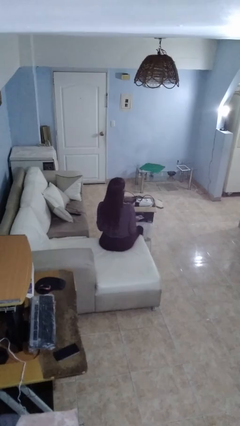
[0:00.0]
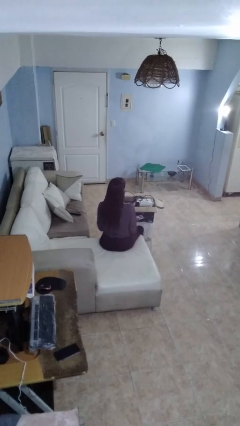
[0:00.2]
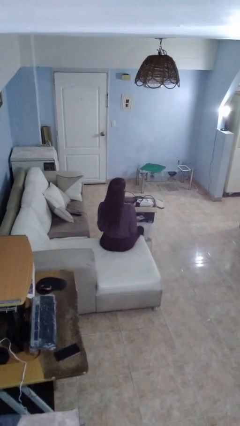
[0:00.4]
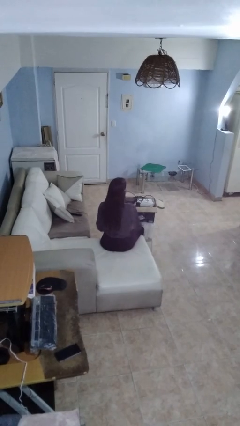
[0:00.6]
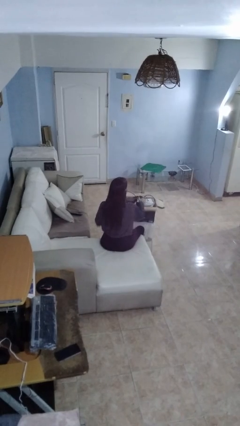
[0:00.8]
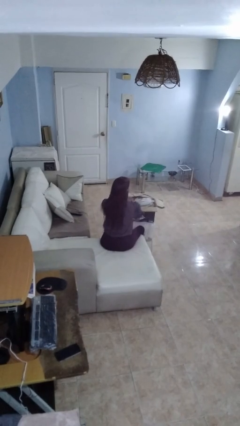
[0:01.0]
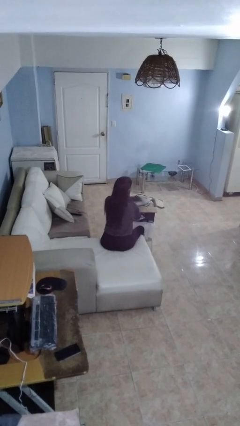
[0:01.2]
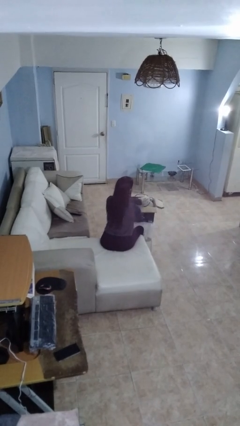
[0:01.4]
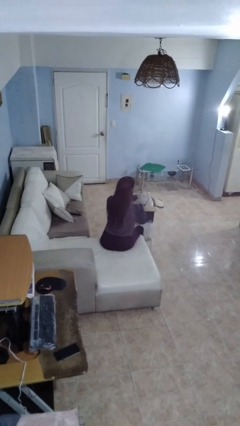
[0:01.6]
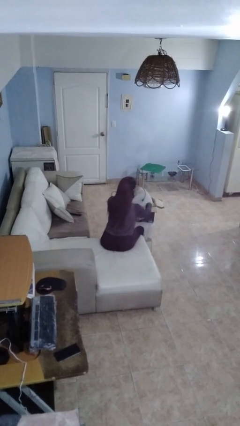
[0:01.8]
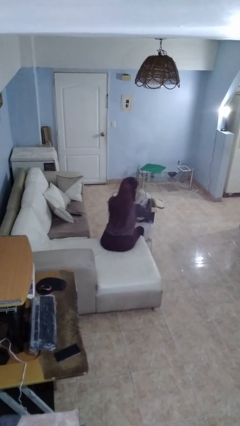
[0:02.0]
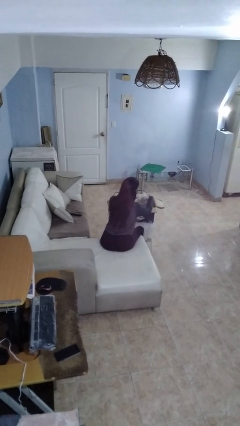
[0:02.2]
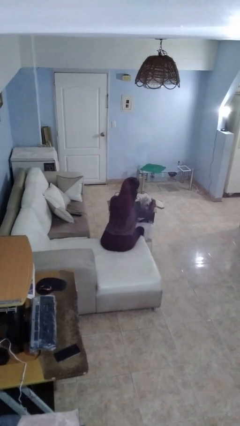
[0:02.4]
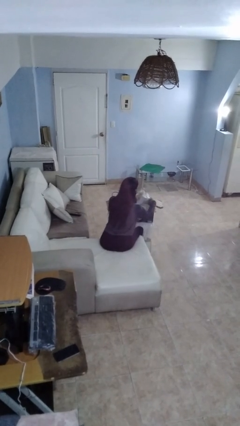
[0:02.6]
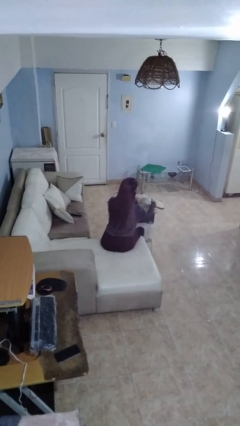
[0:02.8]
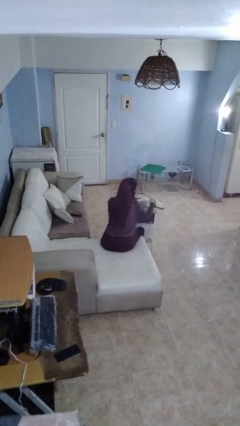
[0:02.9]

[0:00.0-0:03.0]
person searches in box

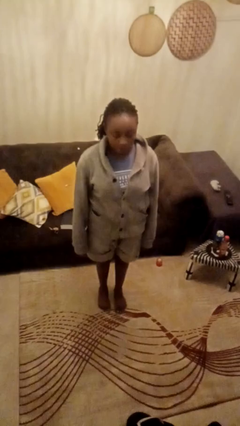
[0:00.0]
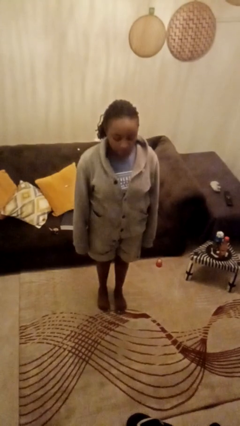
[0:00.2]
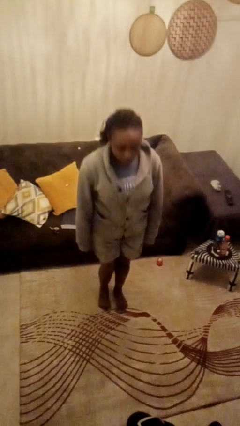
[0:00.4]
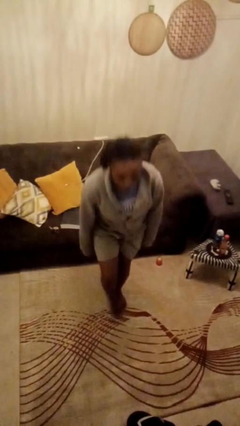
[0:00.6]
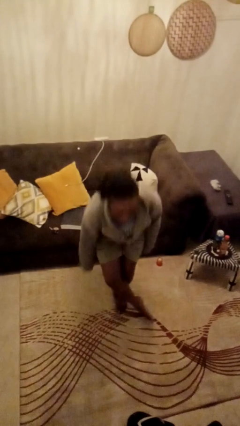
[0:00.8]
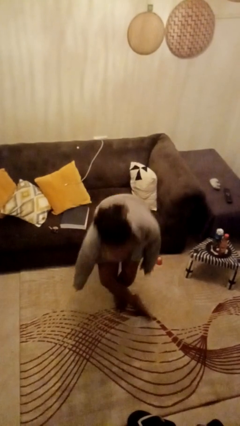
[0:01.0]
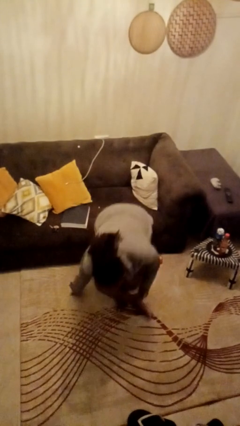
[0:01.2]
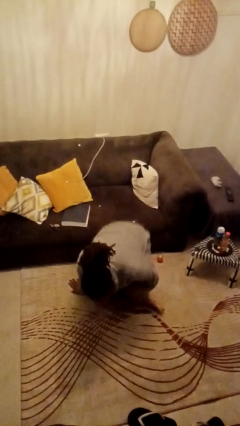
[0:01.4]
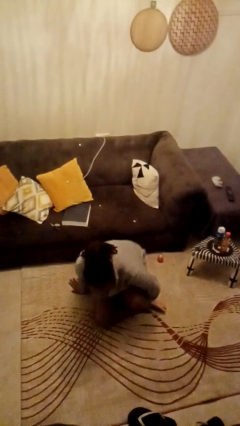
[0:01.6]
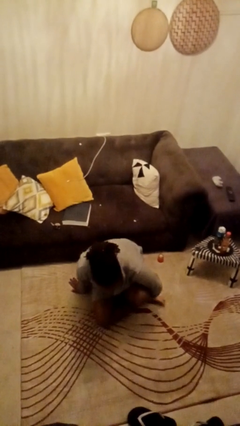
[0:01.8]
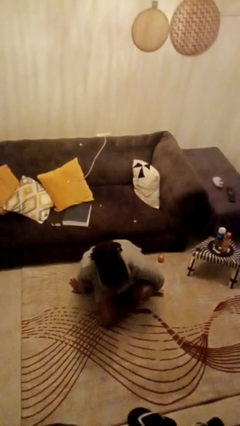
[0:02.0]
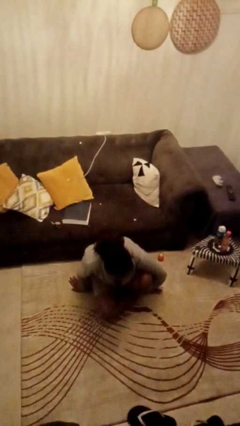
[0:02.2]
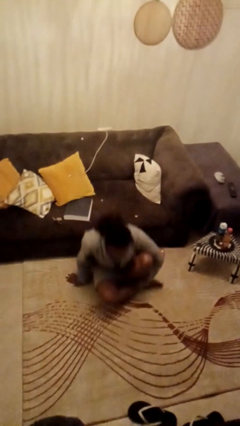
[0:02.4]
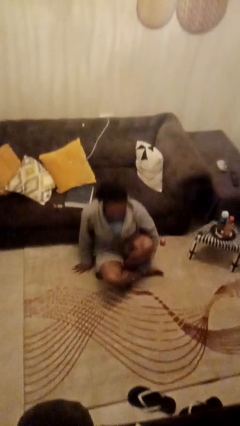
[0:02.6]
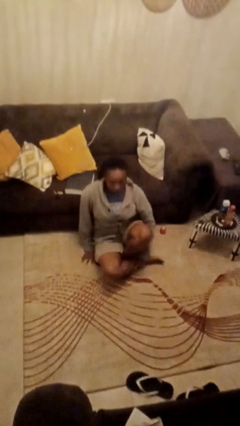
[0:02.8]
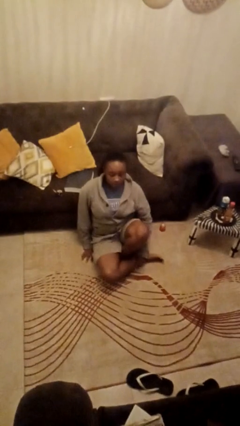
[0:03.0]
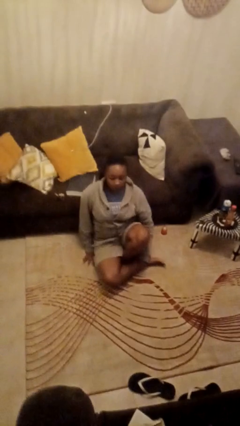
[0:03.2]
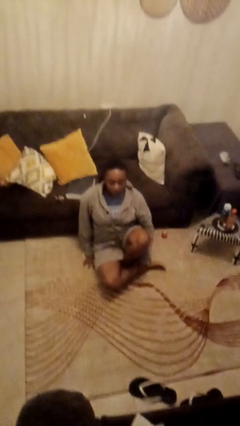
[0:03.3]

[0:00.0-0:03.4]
person sits crisscross

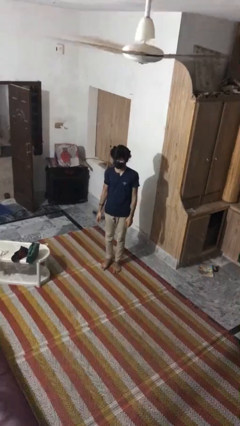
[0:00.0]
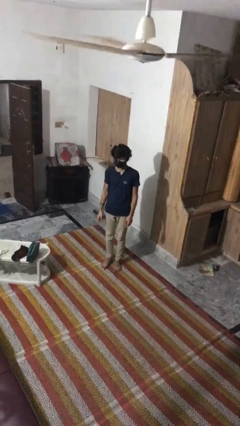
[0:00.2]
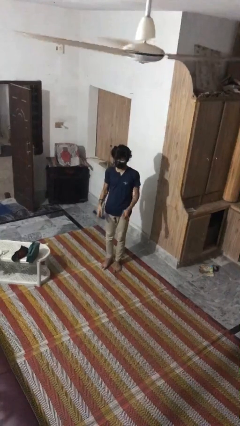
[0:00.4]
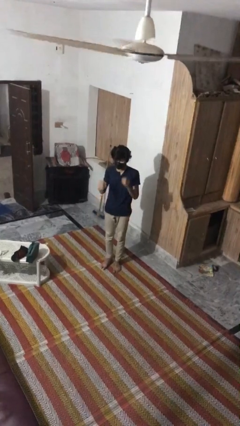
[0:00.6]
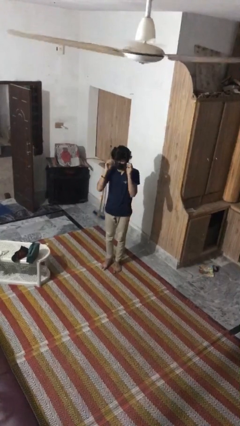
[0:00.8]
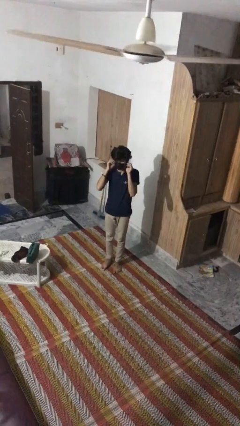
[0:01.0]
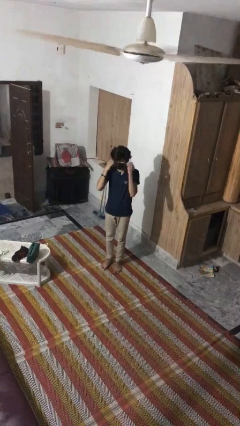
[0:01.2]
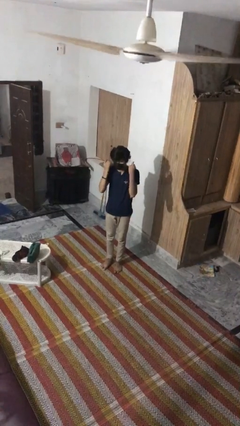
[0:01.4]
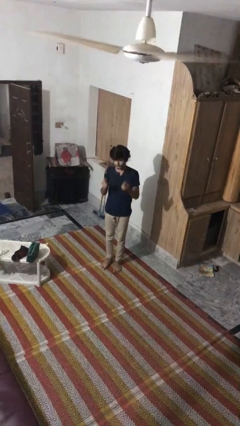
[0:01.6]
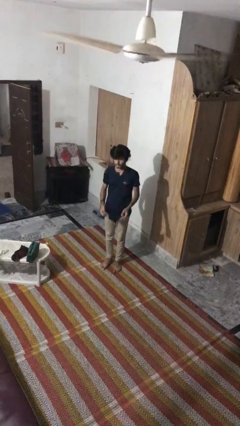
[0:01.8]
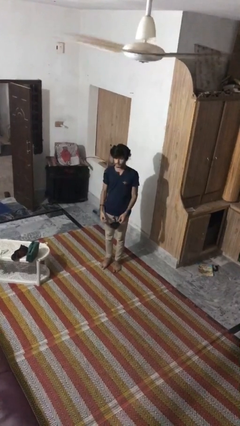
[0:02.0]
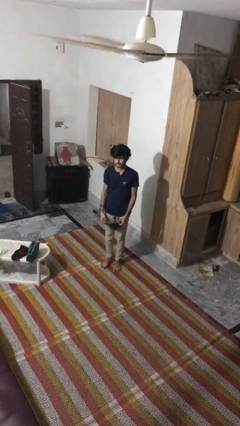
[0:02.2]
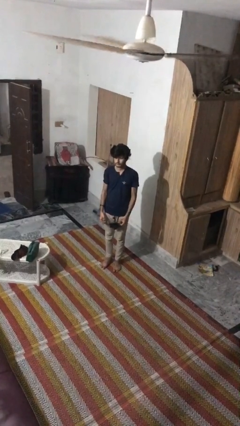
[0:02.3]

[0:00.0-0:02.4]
person takes off facemask

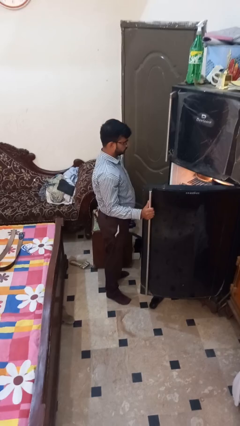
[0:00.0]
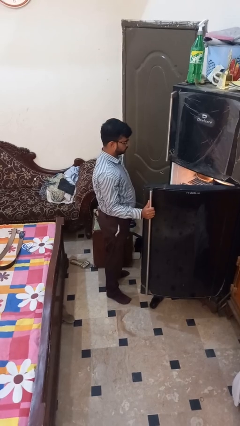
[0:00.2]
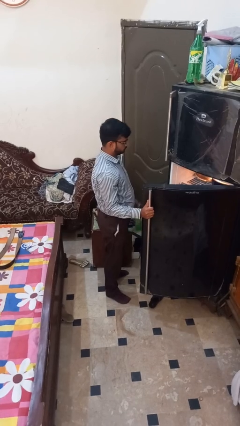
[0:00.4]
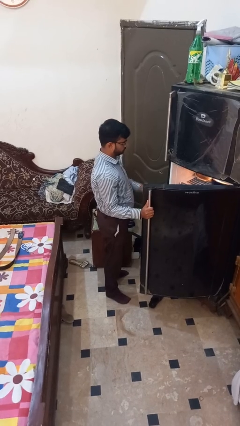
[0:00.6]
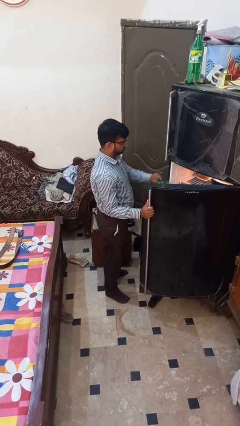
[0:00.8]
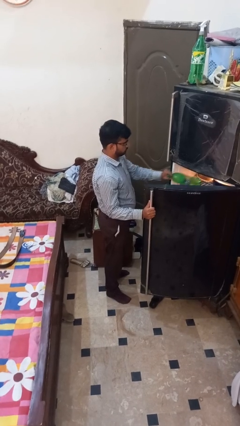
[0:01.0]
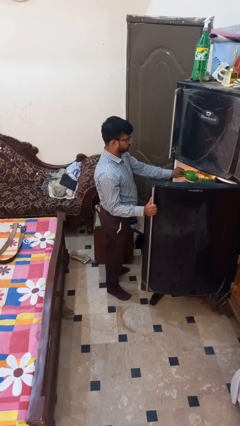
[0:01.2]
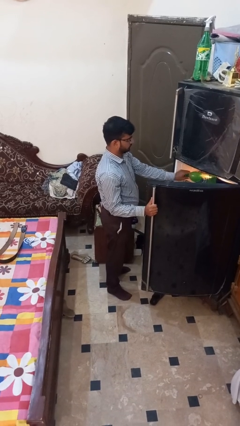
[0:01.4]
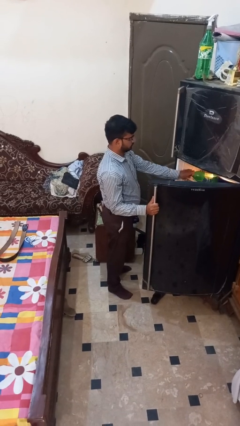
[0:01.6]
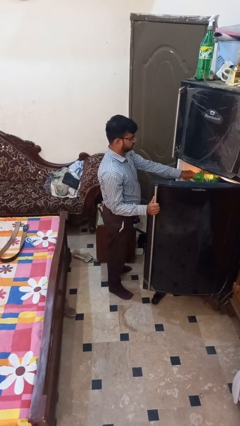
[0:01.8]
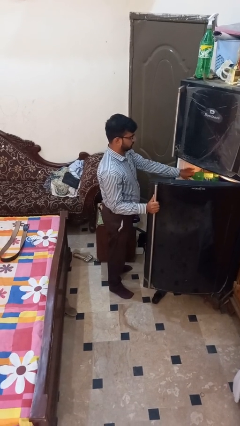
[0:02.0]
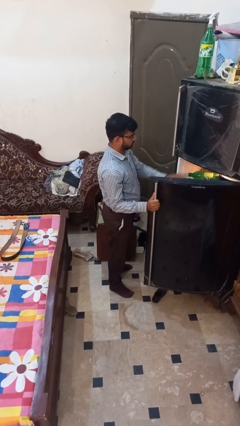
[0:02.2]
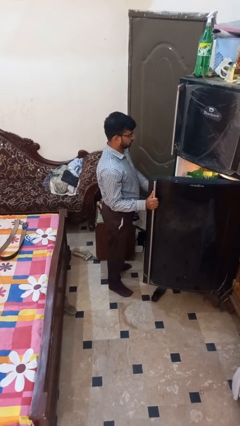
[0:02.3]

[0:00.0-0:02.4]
person puts object into refrigerator

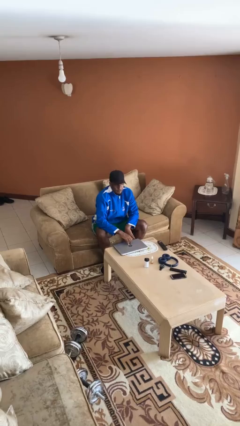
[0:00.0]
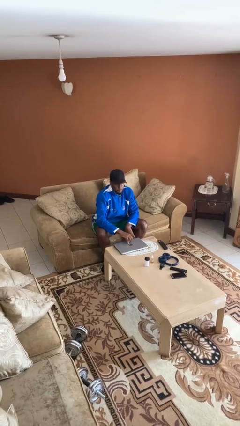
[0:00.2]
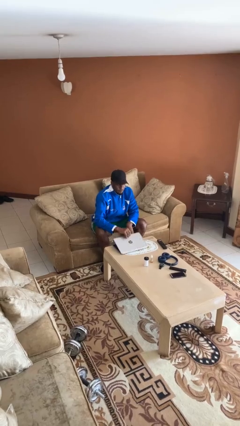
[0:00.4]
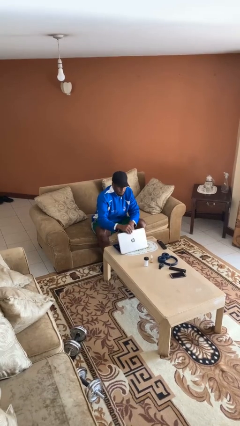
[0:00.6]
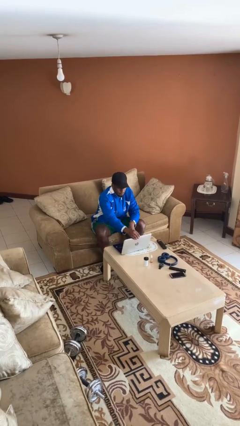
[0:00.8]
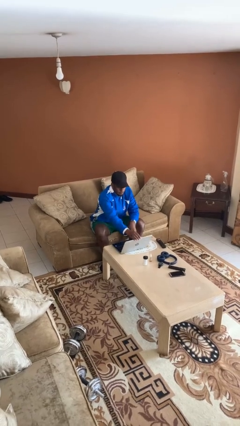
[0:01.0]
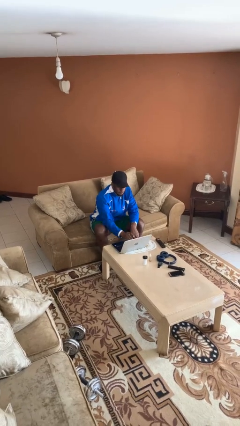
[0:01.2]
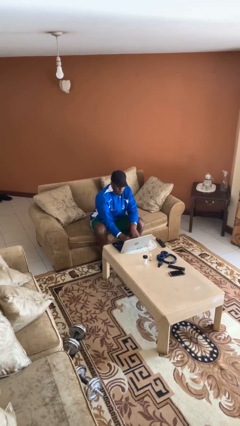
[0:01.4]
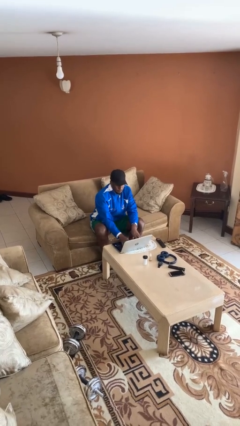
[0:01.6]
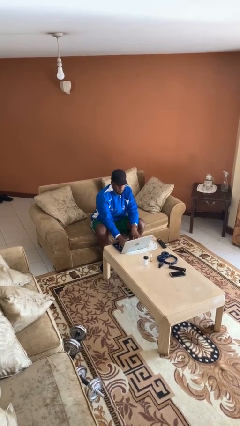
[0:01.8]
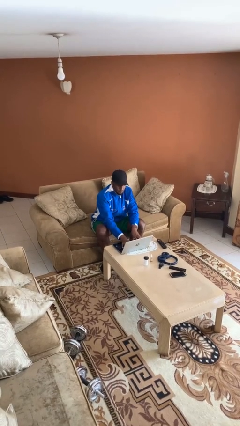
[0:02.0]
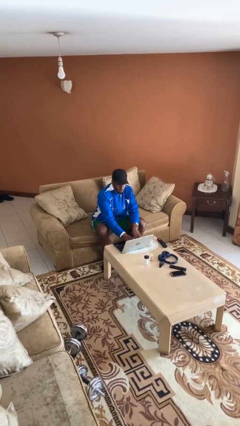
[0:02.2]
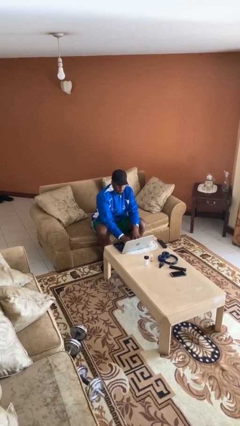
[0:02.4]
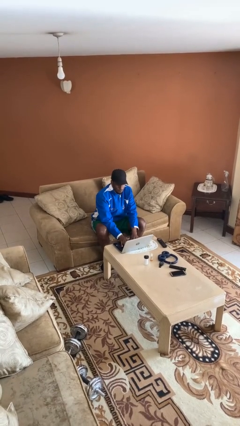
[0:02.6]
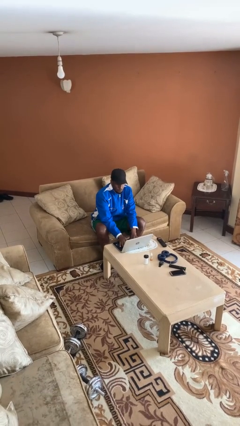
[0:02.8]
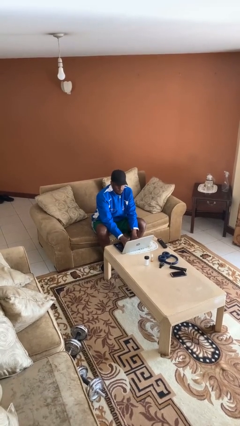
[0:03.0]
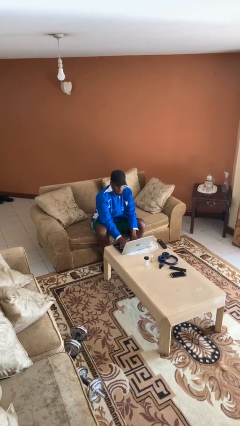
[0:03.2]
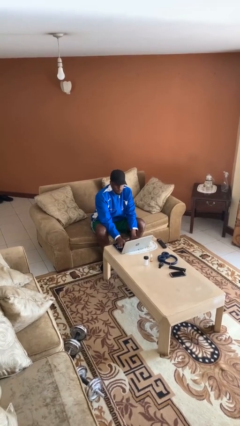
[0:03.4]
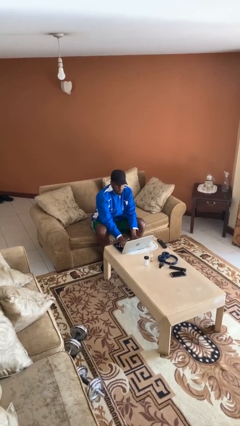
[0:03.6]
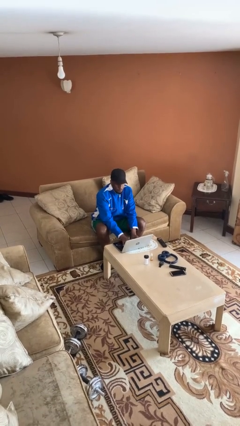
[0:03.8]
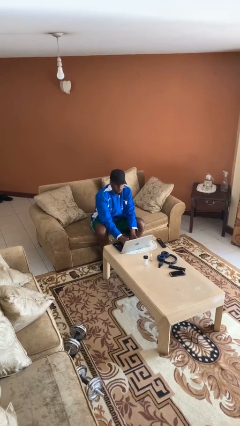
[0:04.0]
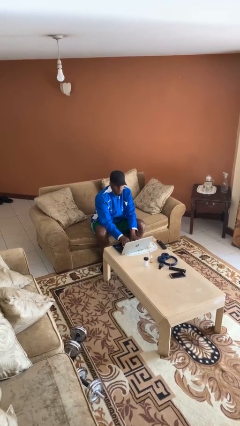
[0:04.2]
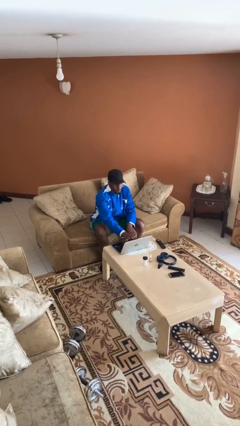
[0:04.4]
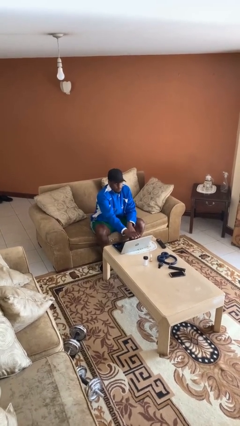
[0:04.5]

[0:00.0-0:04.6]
person interacts with laptop

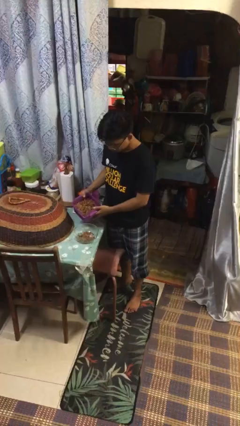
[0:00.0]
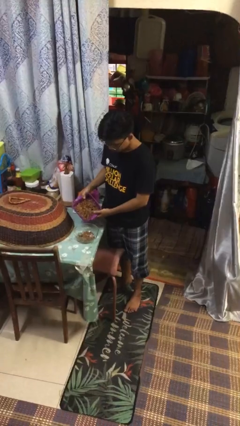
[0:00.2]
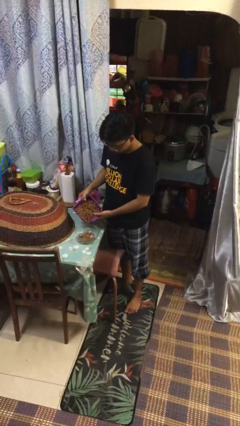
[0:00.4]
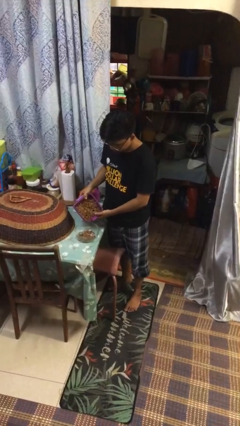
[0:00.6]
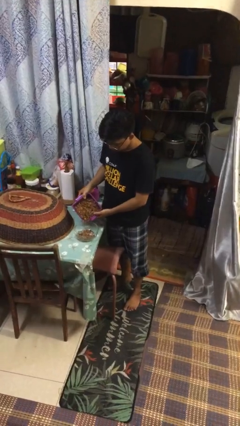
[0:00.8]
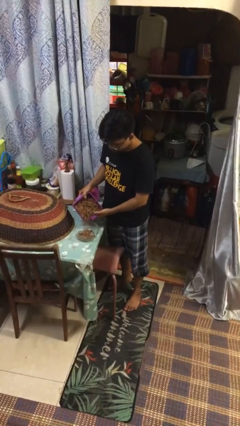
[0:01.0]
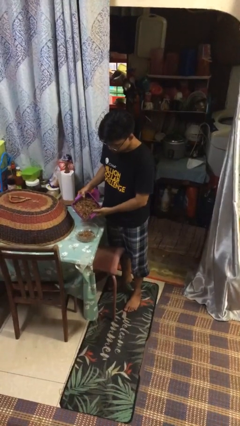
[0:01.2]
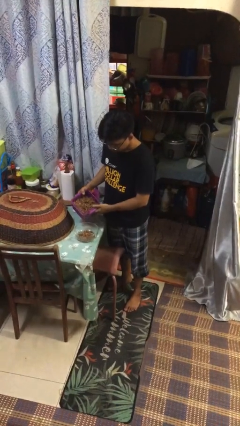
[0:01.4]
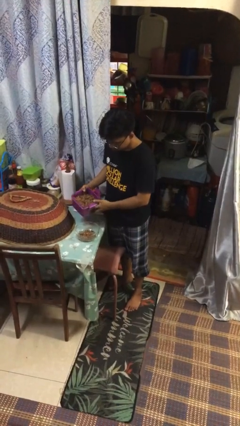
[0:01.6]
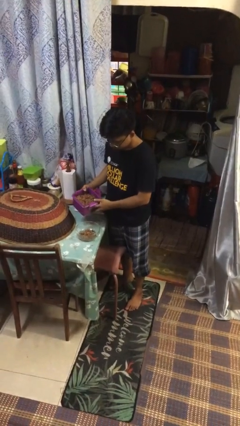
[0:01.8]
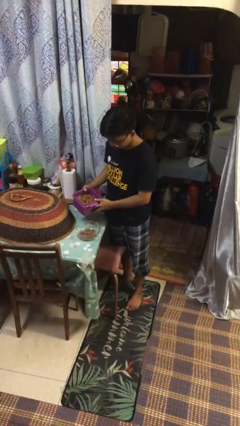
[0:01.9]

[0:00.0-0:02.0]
person pours into bowl

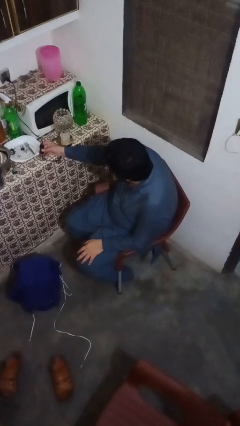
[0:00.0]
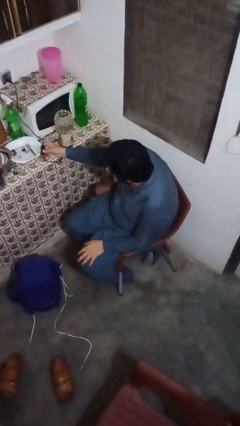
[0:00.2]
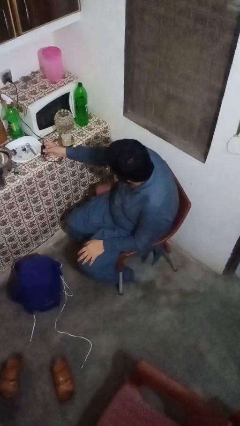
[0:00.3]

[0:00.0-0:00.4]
person turns off lamp
